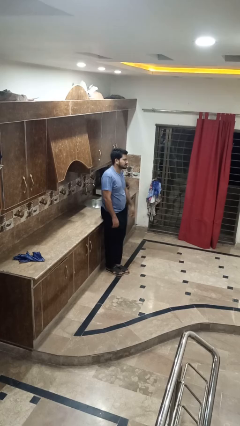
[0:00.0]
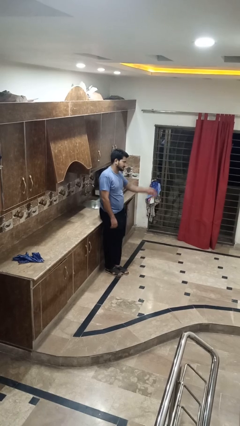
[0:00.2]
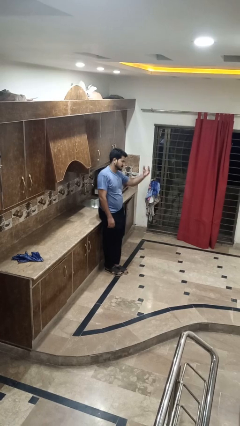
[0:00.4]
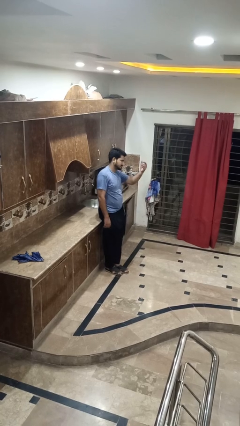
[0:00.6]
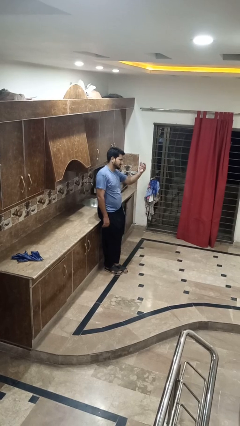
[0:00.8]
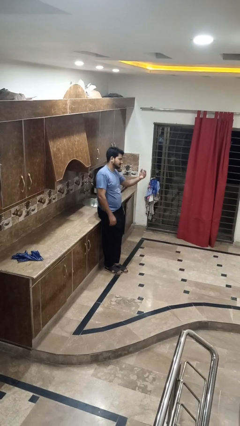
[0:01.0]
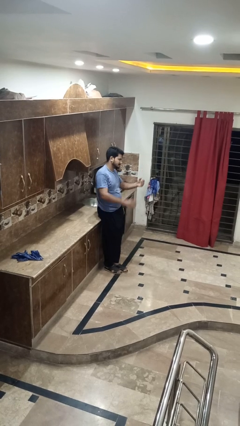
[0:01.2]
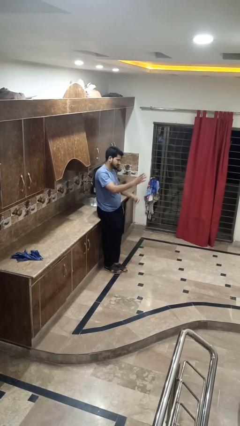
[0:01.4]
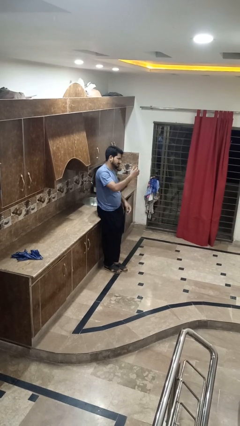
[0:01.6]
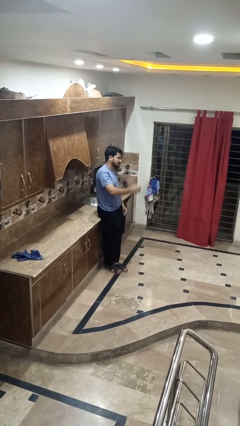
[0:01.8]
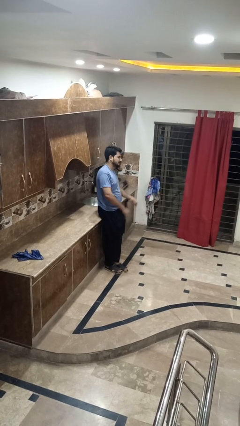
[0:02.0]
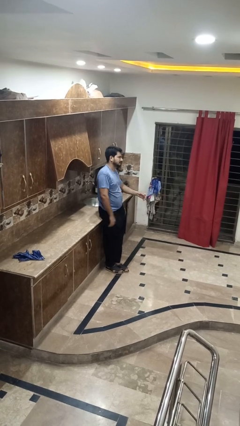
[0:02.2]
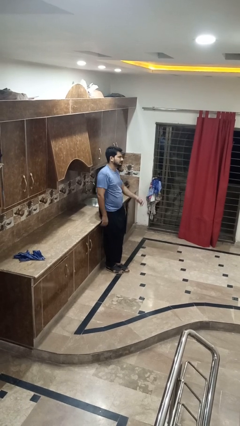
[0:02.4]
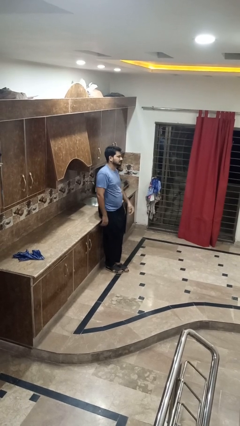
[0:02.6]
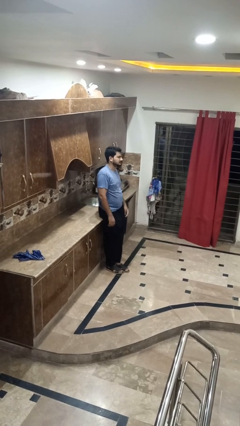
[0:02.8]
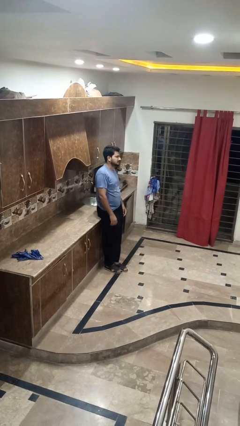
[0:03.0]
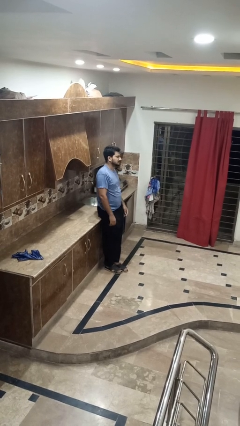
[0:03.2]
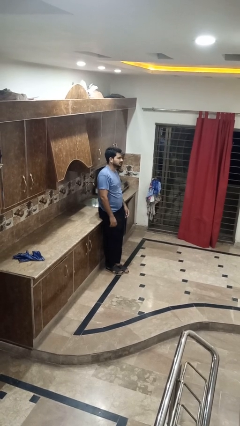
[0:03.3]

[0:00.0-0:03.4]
person gestures come here

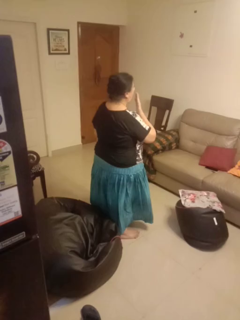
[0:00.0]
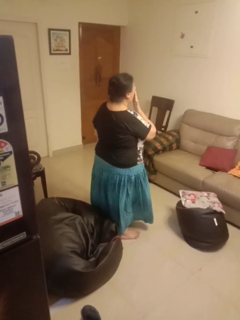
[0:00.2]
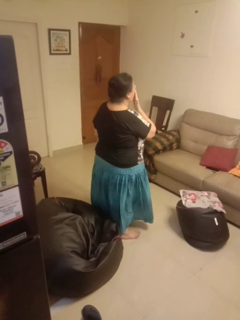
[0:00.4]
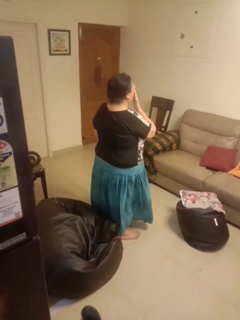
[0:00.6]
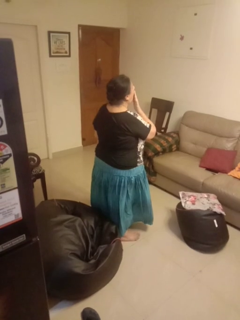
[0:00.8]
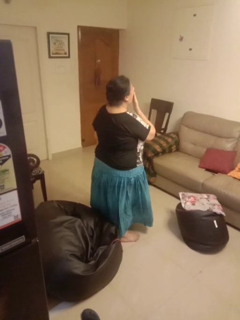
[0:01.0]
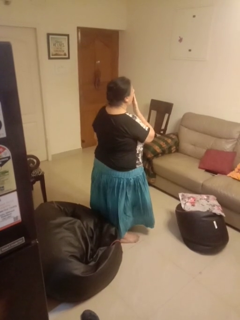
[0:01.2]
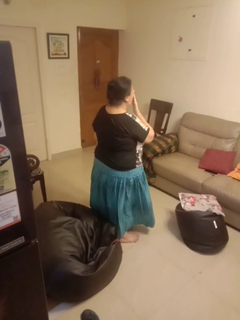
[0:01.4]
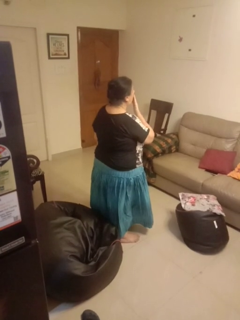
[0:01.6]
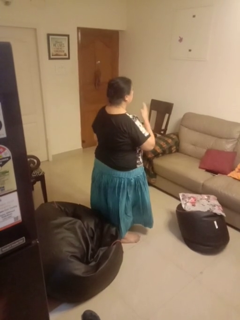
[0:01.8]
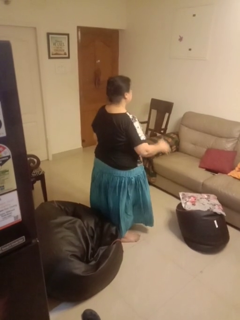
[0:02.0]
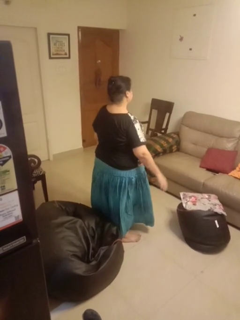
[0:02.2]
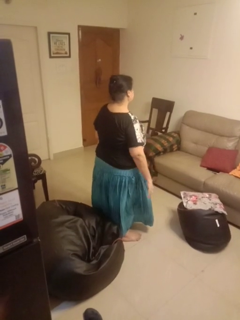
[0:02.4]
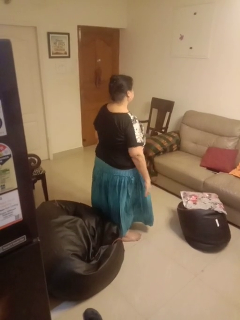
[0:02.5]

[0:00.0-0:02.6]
person yawns

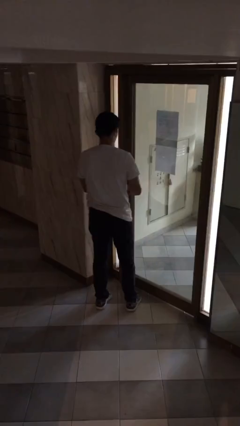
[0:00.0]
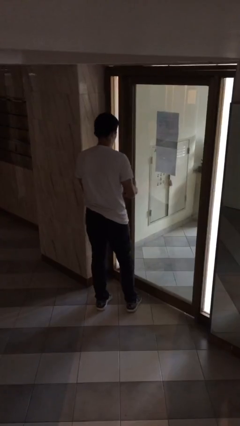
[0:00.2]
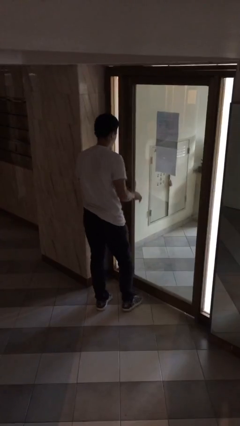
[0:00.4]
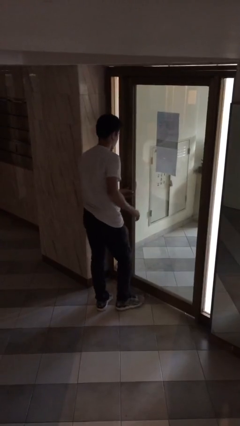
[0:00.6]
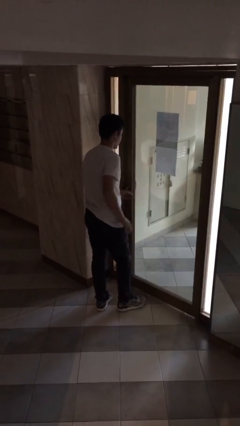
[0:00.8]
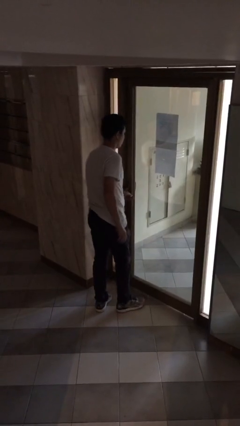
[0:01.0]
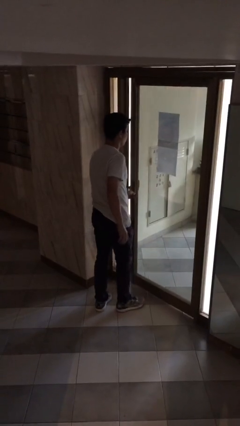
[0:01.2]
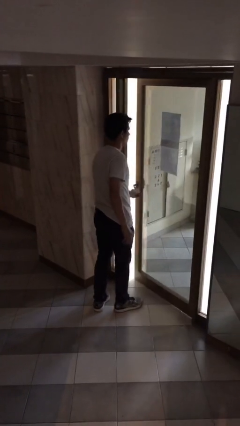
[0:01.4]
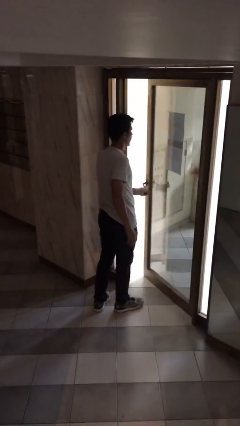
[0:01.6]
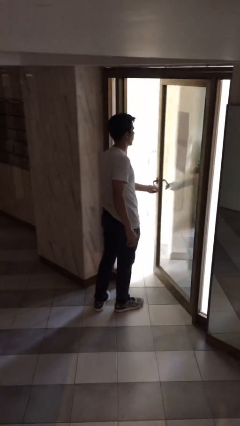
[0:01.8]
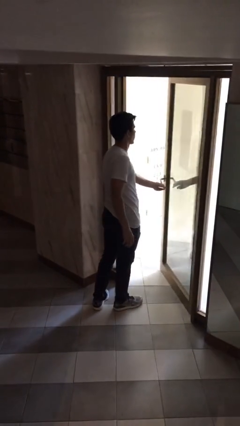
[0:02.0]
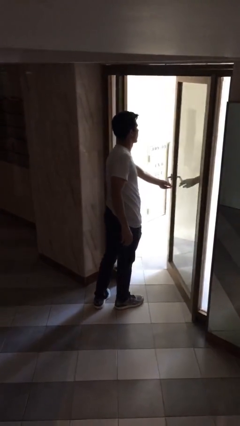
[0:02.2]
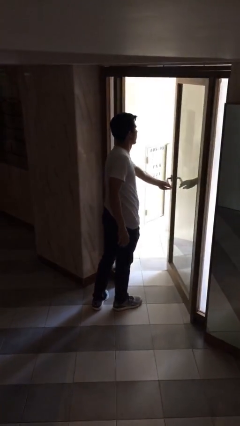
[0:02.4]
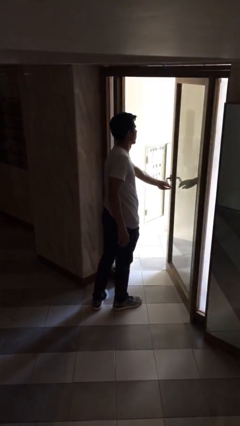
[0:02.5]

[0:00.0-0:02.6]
person opens facility door

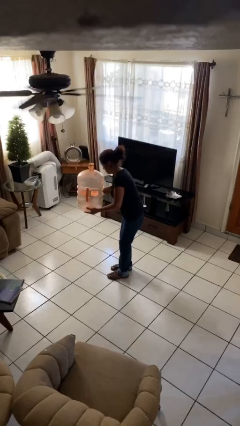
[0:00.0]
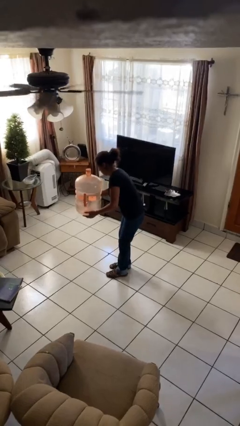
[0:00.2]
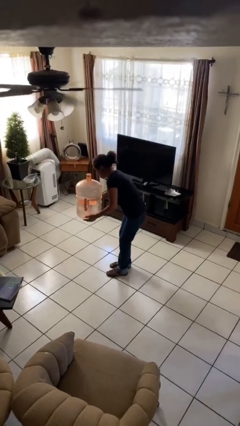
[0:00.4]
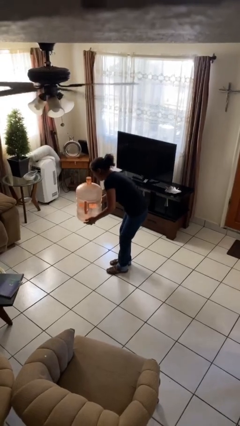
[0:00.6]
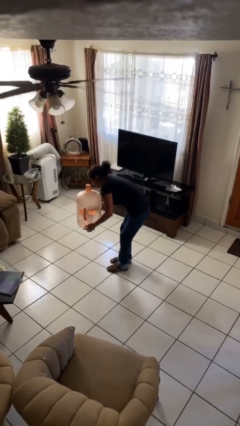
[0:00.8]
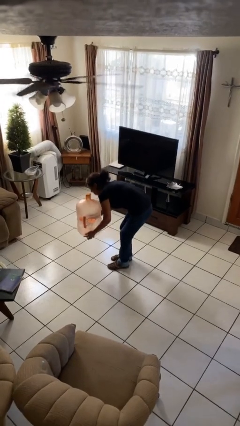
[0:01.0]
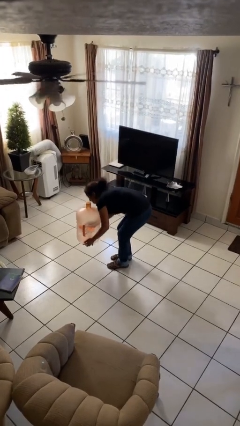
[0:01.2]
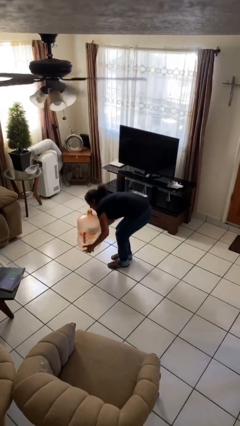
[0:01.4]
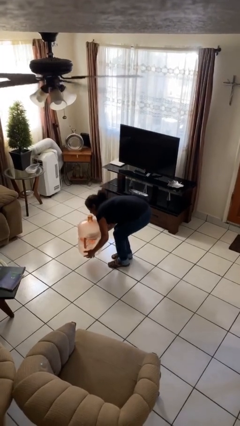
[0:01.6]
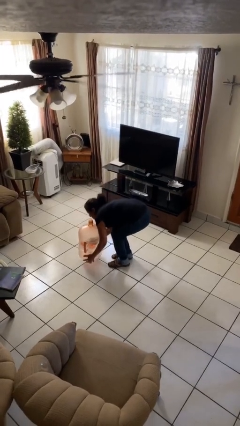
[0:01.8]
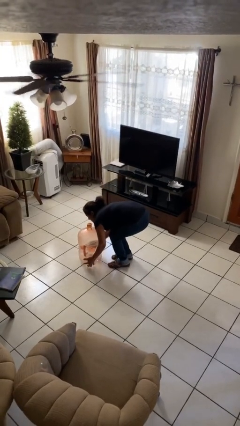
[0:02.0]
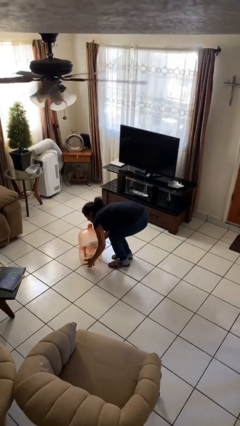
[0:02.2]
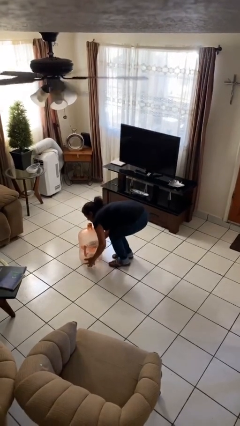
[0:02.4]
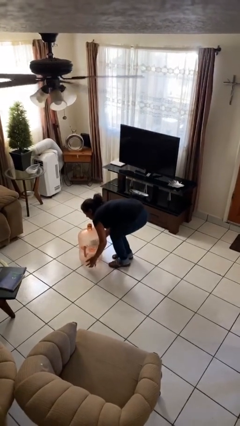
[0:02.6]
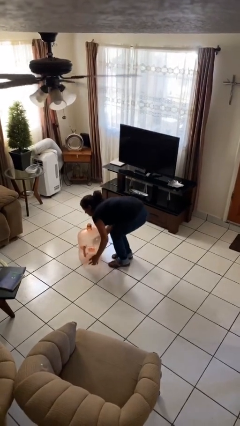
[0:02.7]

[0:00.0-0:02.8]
person puts down object on floor

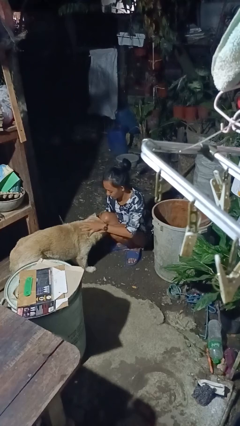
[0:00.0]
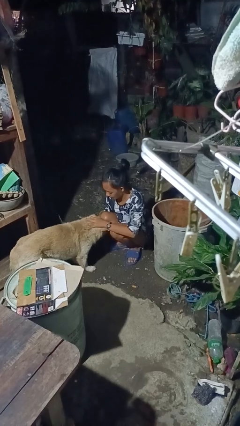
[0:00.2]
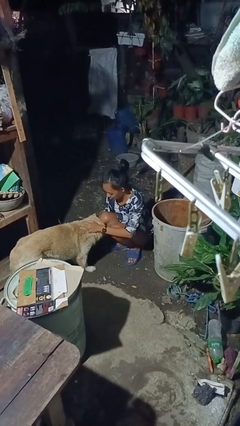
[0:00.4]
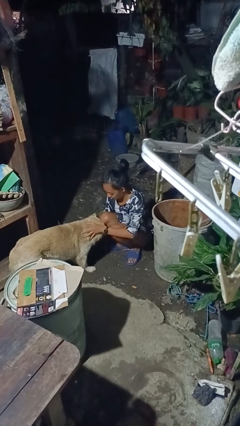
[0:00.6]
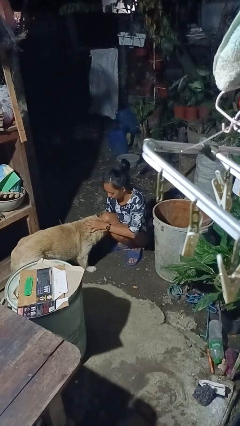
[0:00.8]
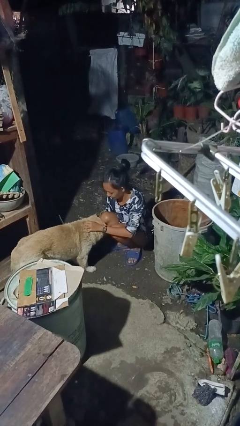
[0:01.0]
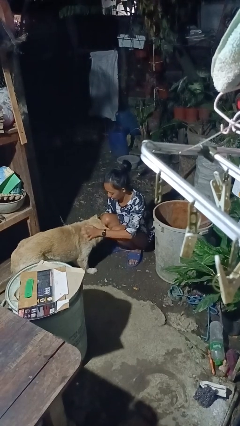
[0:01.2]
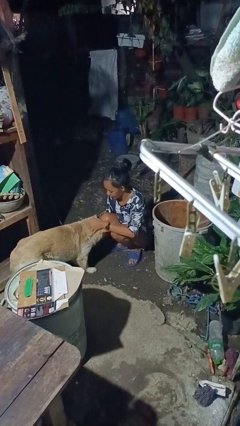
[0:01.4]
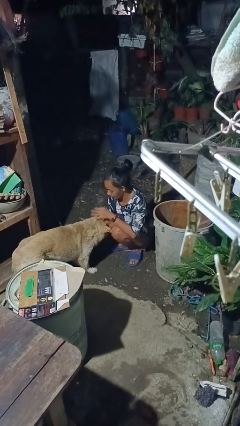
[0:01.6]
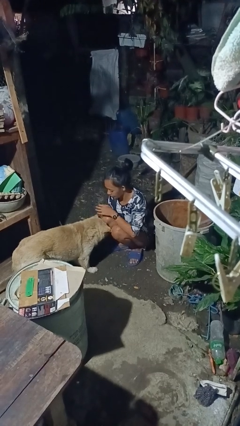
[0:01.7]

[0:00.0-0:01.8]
person pets dog

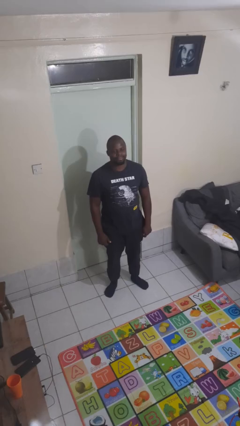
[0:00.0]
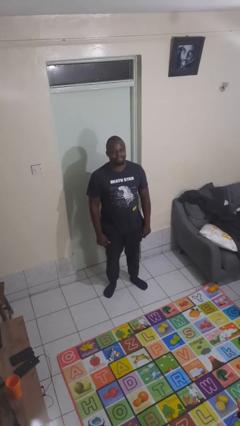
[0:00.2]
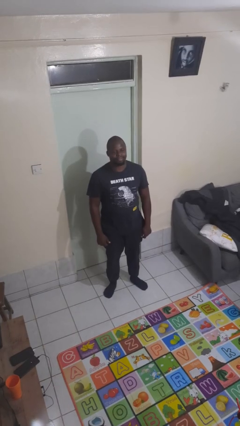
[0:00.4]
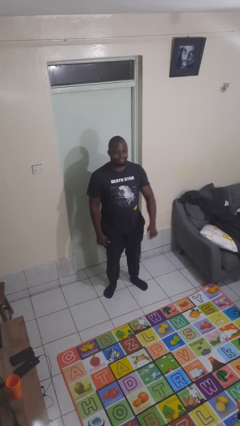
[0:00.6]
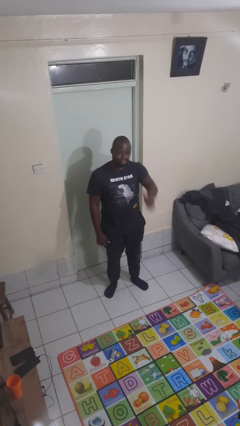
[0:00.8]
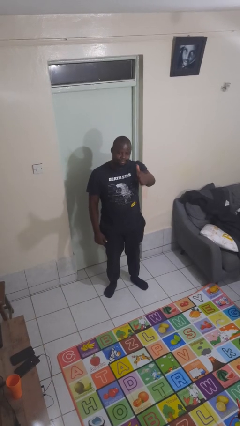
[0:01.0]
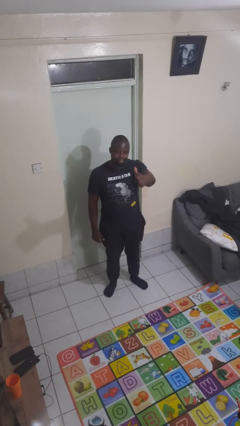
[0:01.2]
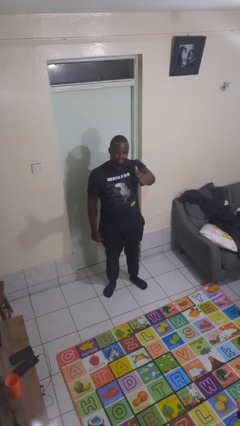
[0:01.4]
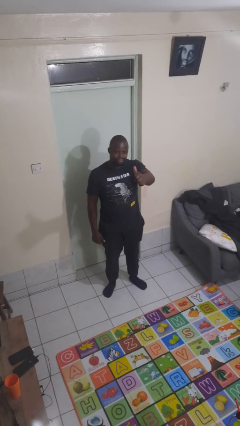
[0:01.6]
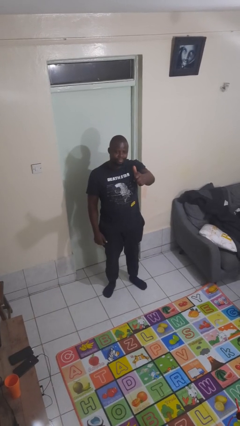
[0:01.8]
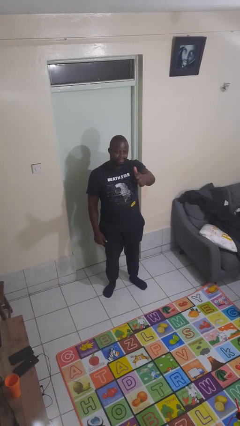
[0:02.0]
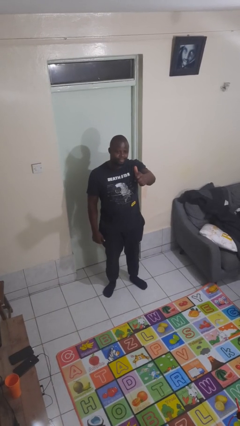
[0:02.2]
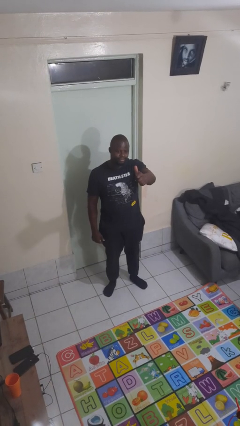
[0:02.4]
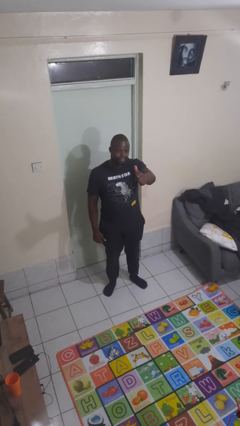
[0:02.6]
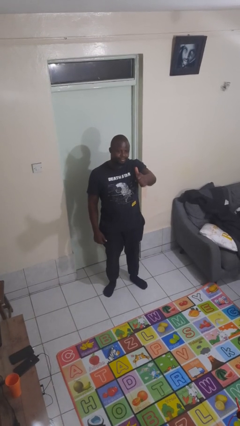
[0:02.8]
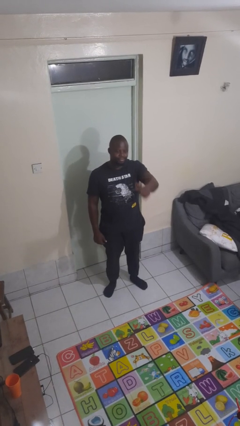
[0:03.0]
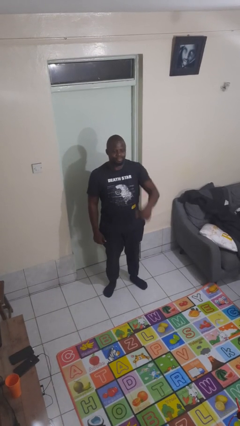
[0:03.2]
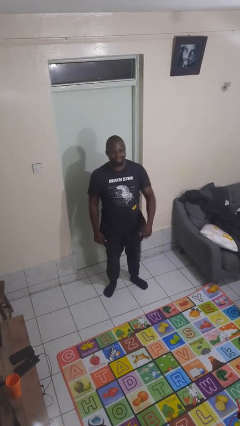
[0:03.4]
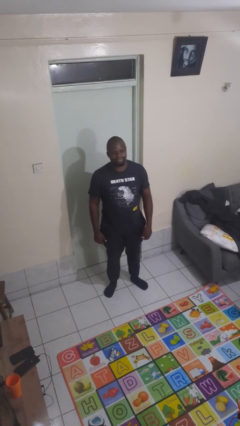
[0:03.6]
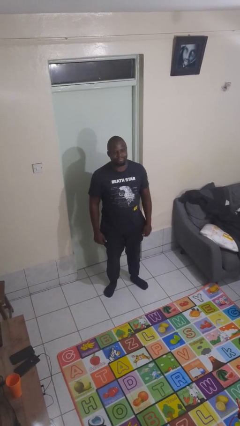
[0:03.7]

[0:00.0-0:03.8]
person gestures thumbs up

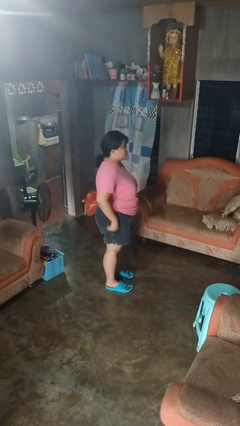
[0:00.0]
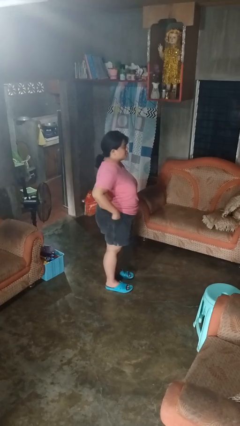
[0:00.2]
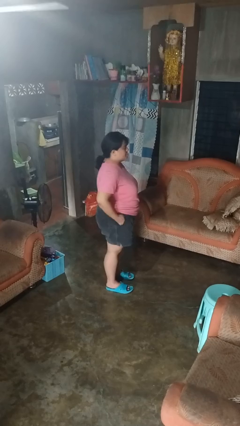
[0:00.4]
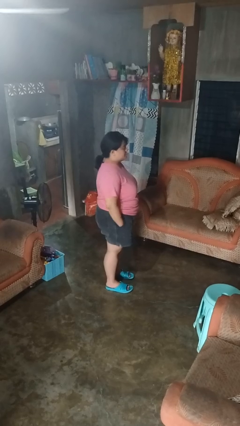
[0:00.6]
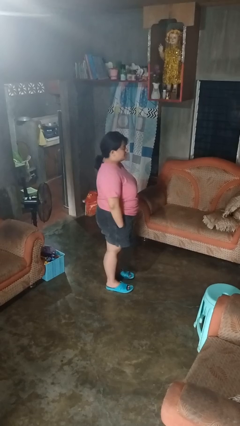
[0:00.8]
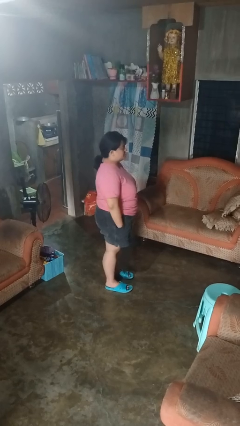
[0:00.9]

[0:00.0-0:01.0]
person puts hands in back pockets
